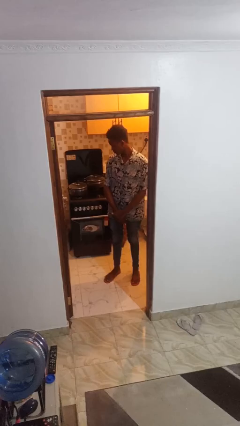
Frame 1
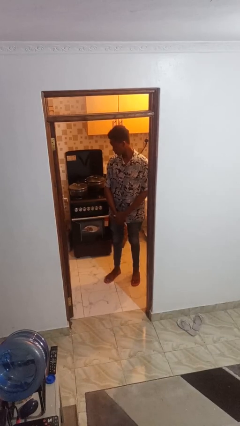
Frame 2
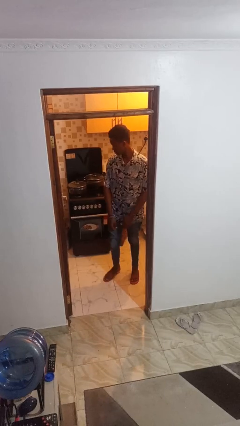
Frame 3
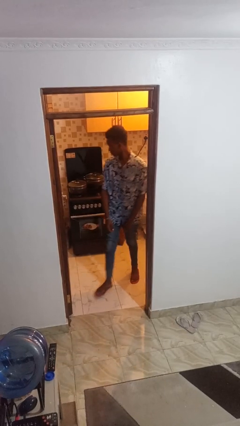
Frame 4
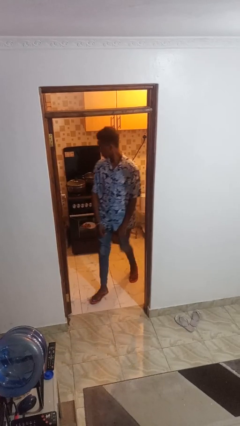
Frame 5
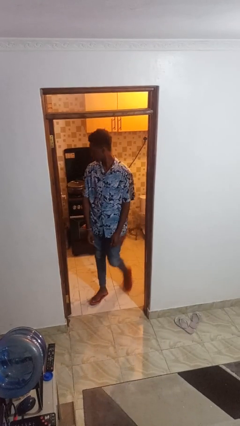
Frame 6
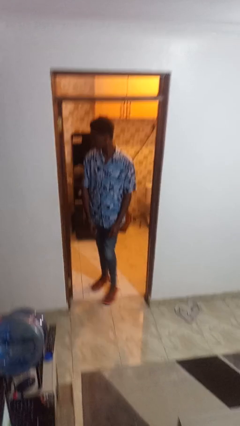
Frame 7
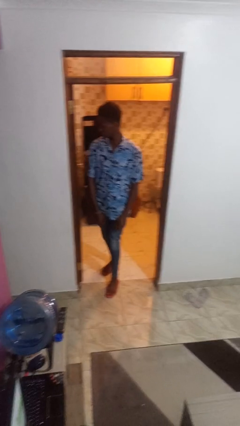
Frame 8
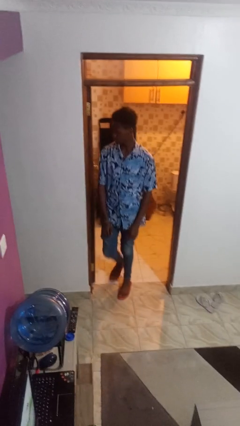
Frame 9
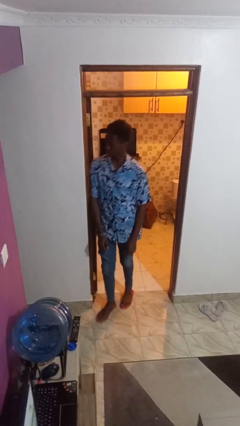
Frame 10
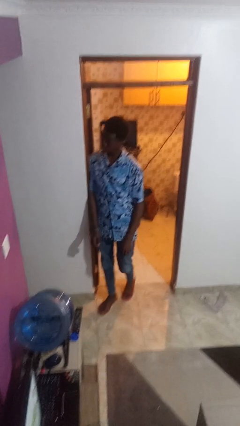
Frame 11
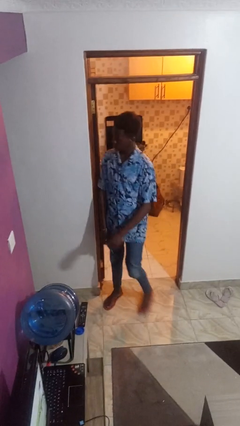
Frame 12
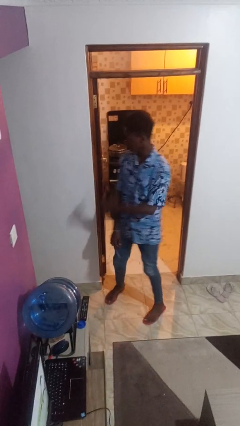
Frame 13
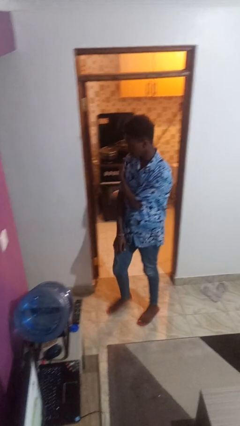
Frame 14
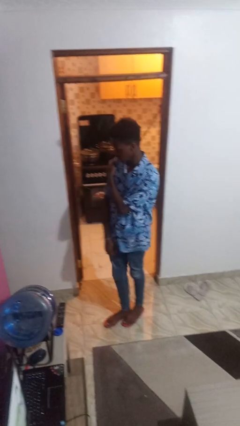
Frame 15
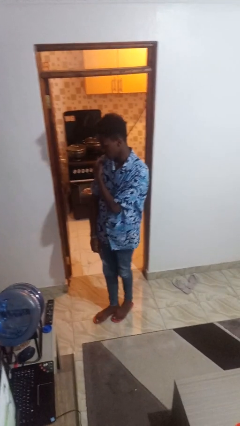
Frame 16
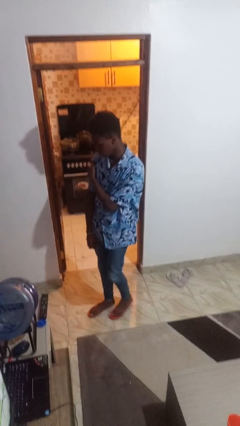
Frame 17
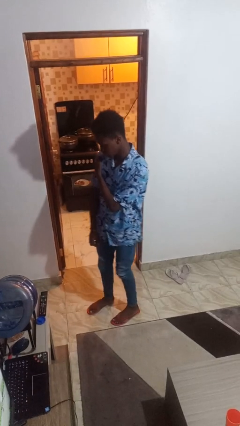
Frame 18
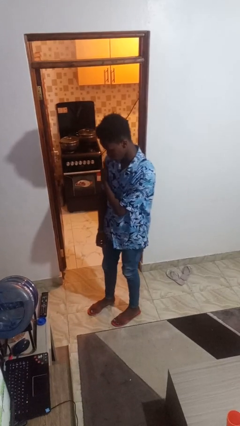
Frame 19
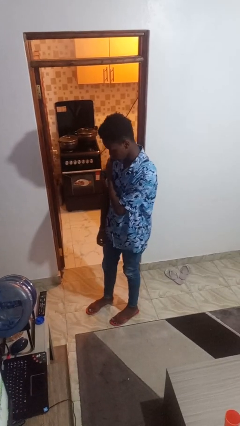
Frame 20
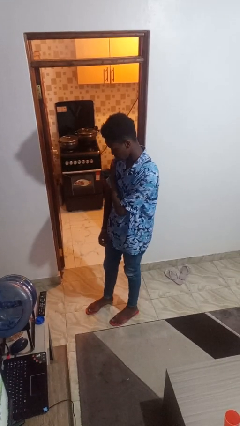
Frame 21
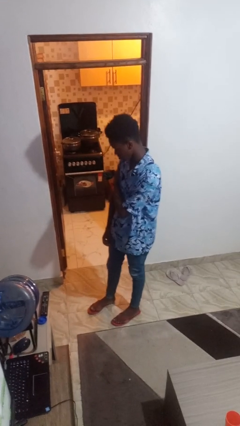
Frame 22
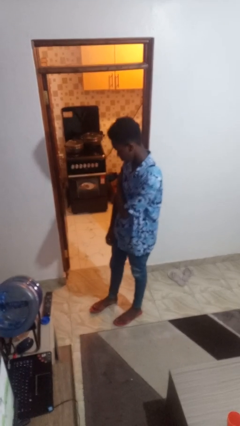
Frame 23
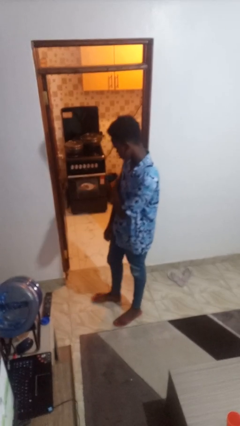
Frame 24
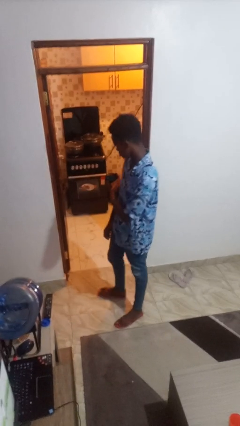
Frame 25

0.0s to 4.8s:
person bumps into wall

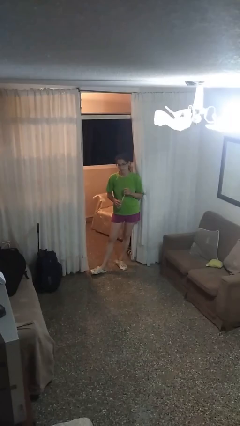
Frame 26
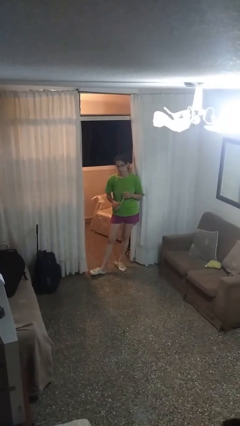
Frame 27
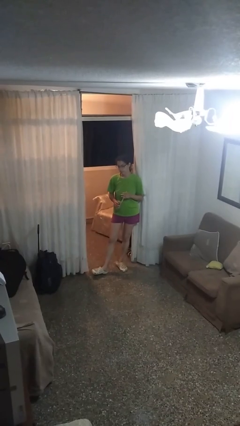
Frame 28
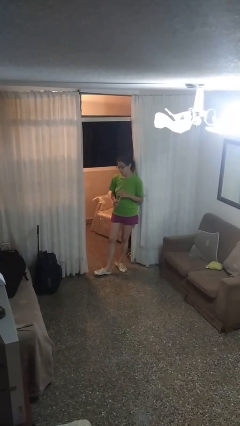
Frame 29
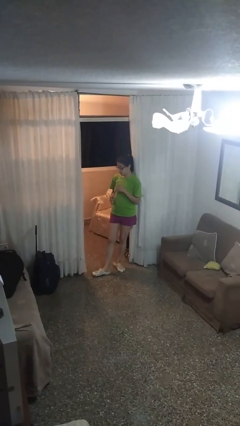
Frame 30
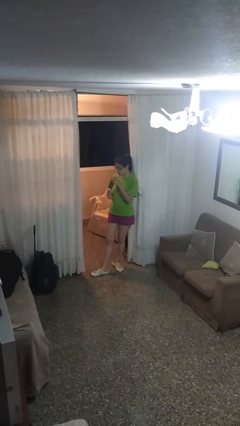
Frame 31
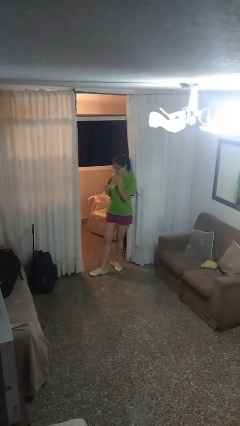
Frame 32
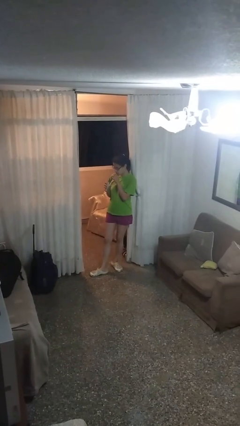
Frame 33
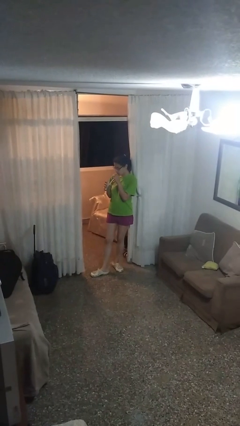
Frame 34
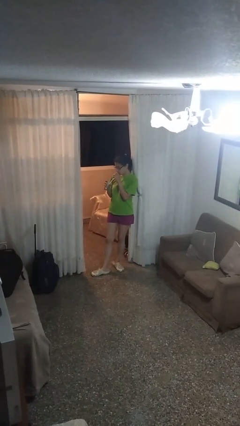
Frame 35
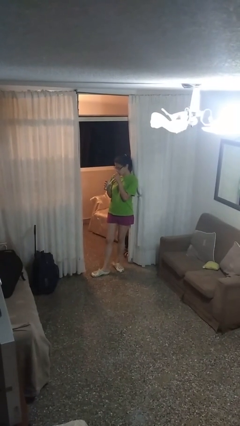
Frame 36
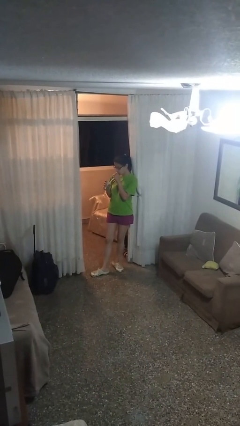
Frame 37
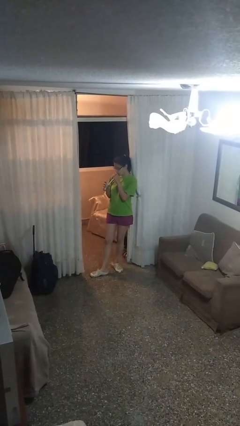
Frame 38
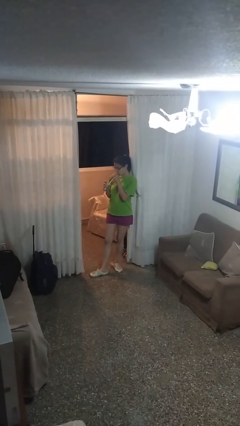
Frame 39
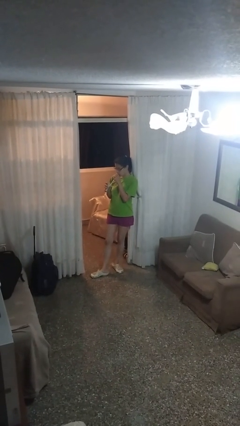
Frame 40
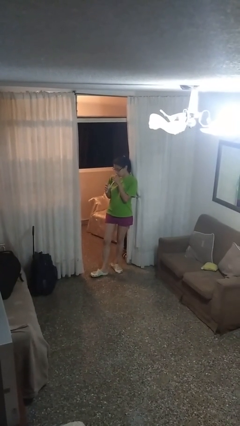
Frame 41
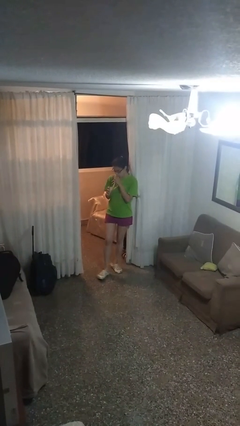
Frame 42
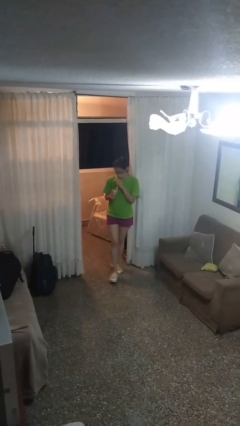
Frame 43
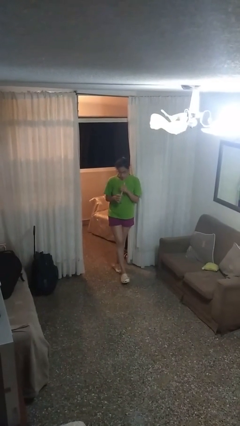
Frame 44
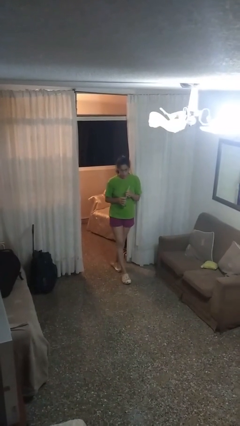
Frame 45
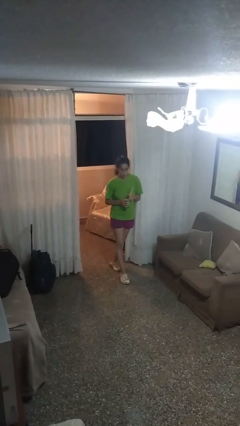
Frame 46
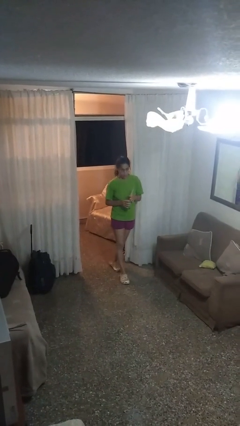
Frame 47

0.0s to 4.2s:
person drinks from straw

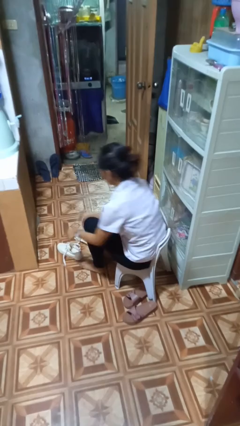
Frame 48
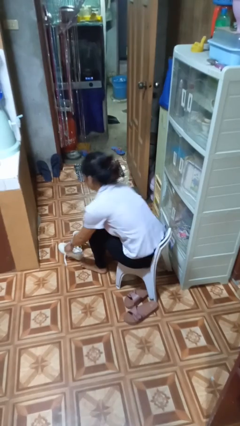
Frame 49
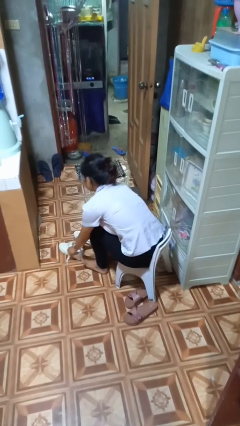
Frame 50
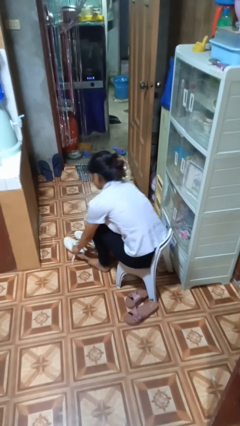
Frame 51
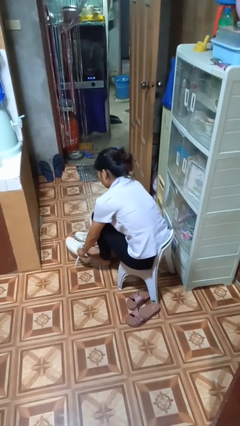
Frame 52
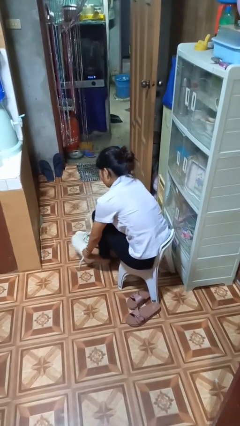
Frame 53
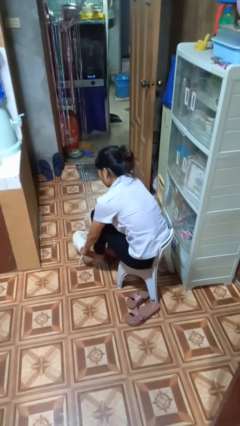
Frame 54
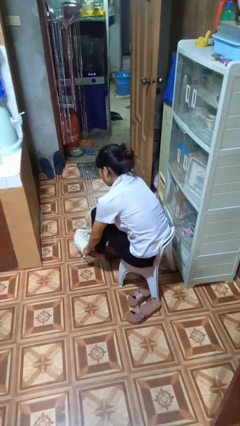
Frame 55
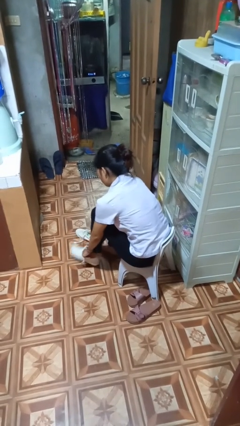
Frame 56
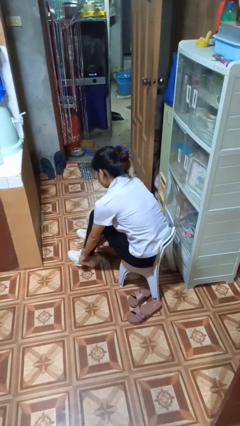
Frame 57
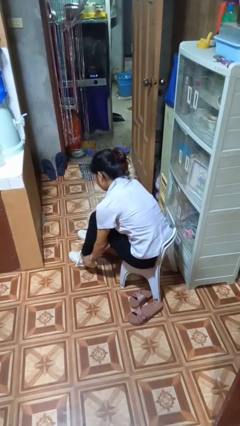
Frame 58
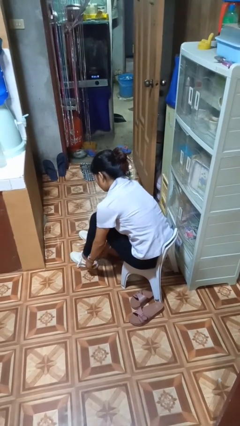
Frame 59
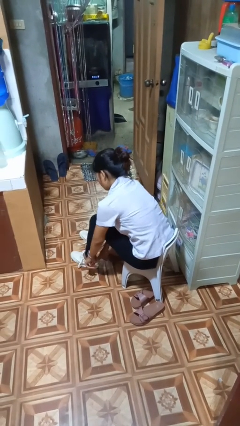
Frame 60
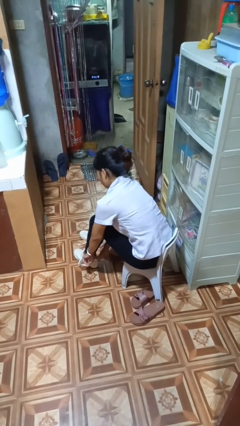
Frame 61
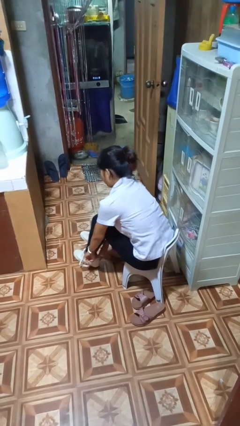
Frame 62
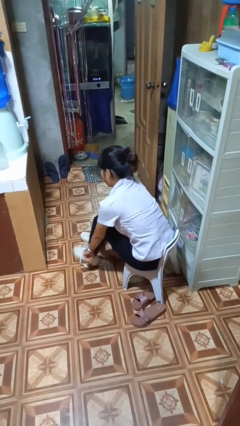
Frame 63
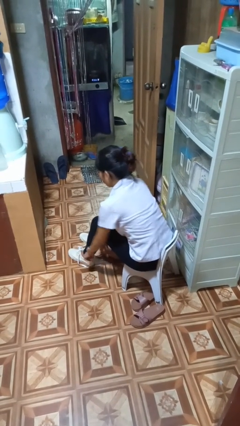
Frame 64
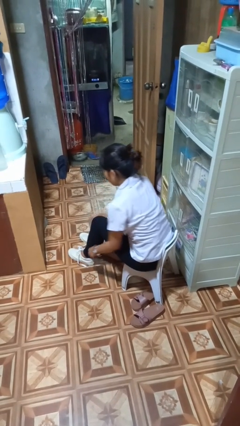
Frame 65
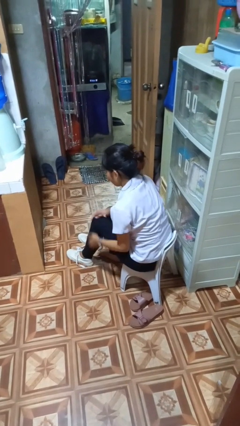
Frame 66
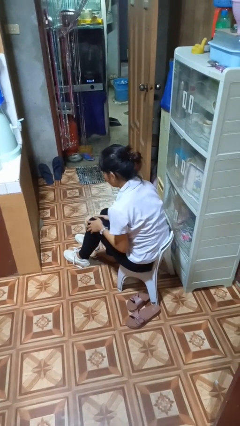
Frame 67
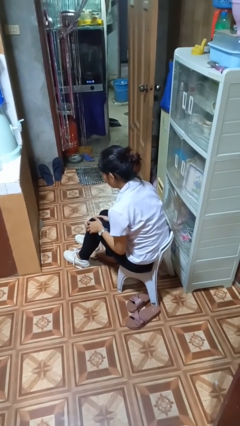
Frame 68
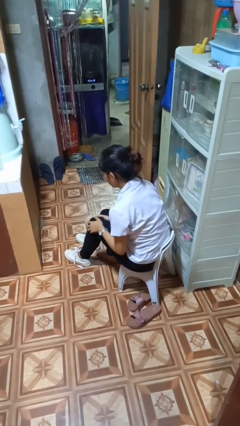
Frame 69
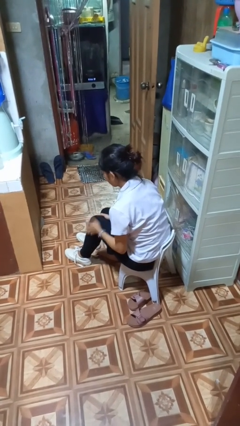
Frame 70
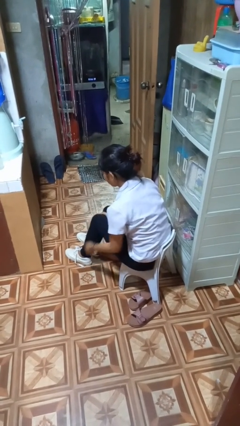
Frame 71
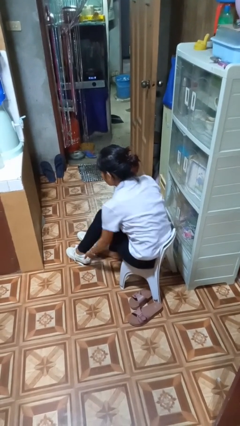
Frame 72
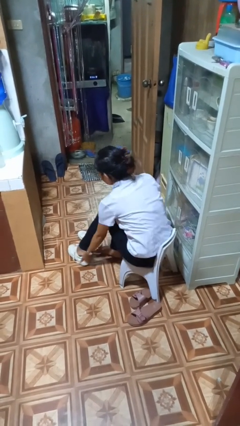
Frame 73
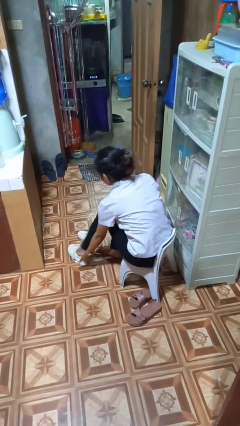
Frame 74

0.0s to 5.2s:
person puts on shoes

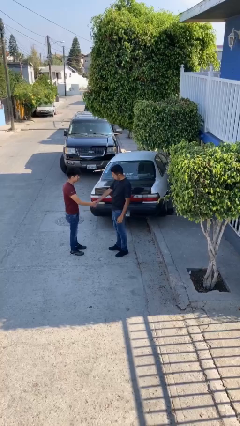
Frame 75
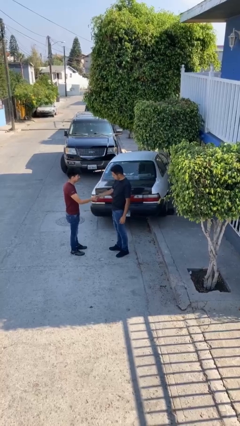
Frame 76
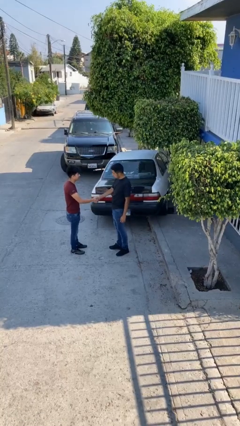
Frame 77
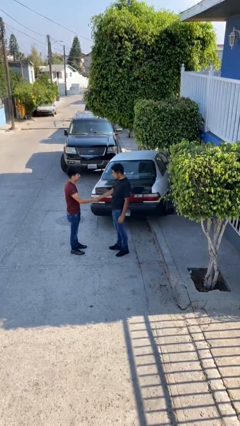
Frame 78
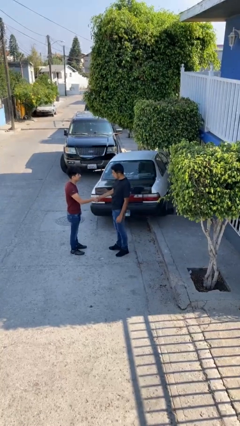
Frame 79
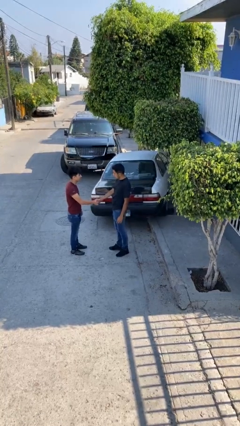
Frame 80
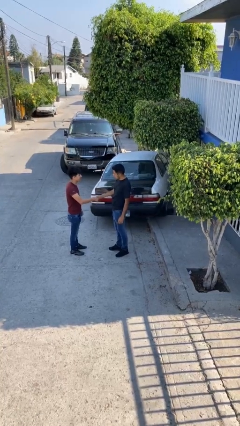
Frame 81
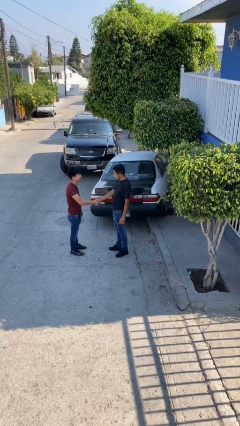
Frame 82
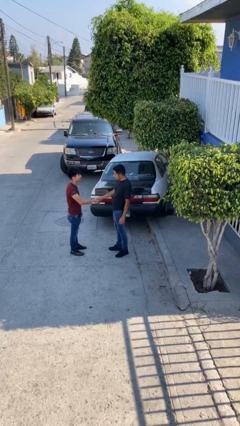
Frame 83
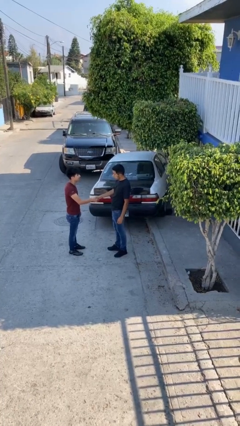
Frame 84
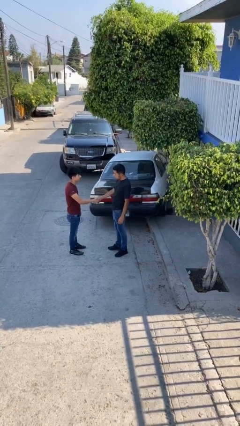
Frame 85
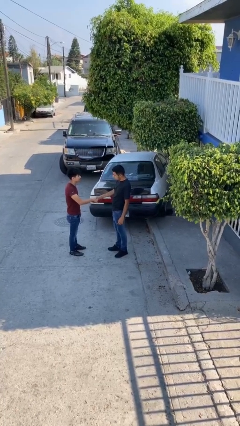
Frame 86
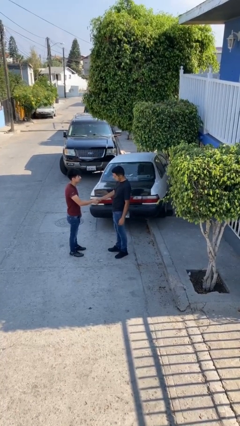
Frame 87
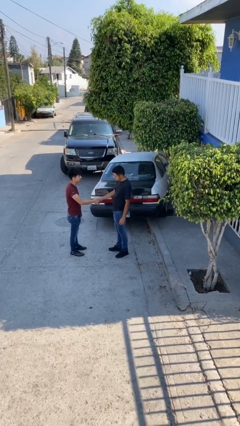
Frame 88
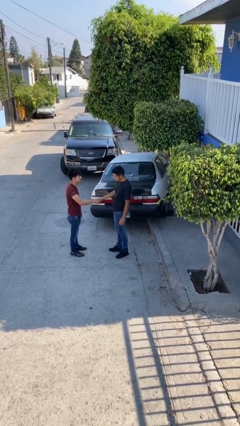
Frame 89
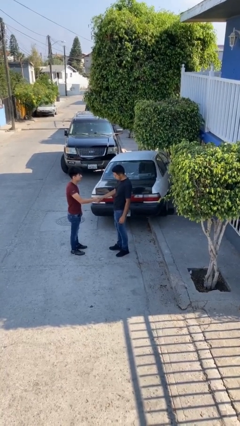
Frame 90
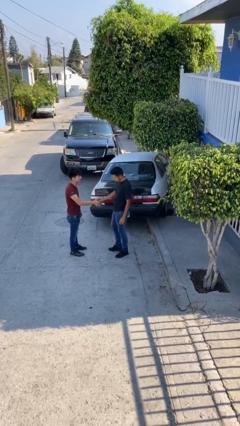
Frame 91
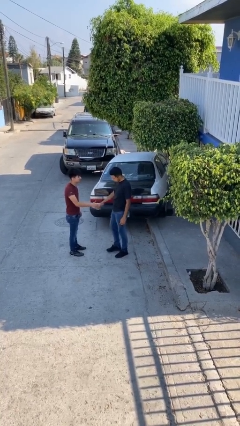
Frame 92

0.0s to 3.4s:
person shakes hand
